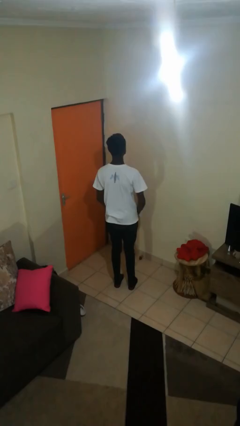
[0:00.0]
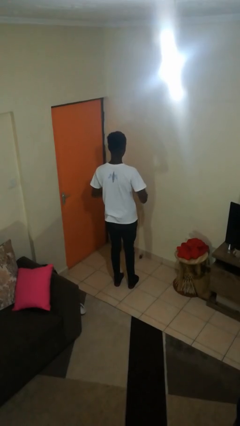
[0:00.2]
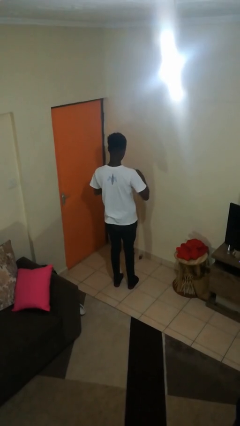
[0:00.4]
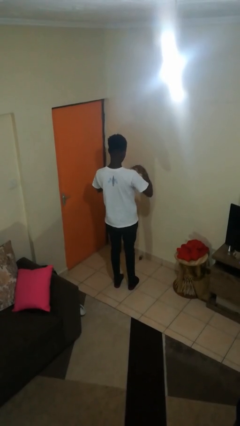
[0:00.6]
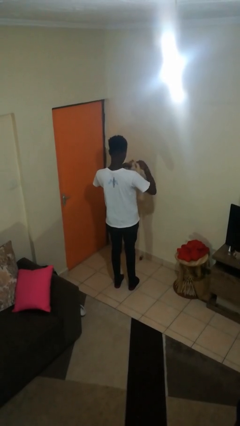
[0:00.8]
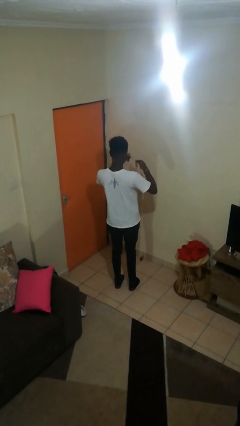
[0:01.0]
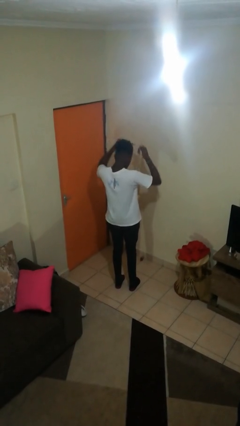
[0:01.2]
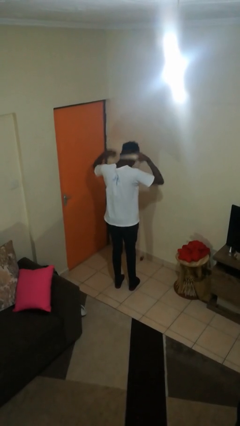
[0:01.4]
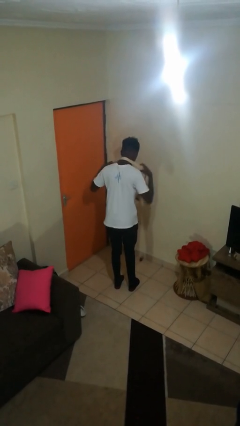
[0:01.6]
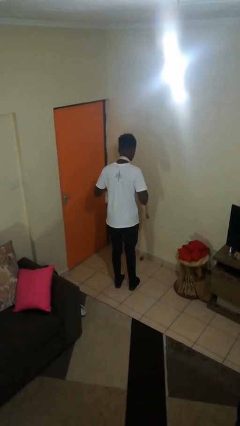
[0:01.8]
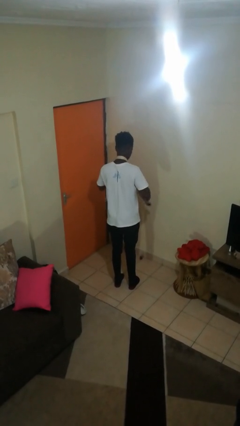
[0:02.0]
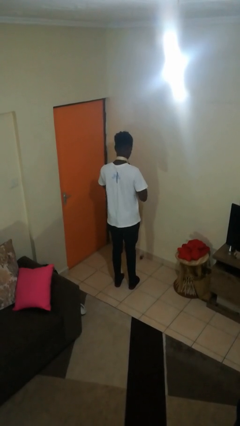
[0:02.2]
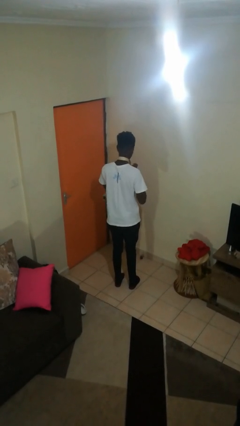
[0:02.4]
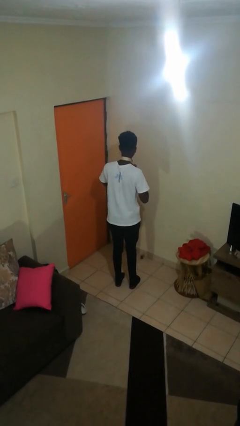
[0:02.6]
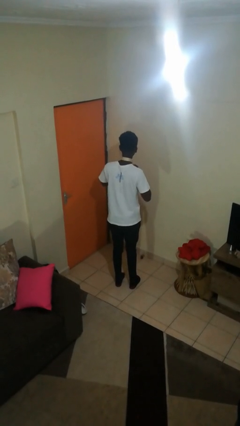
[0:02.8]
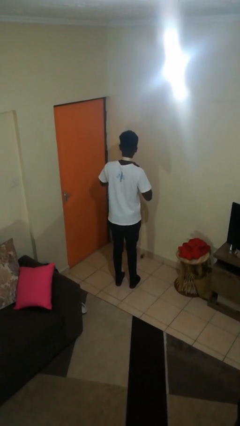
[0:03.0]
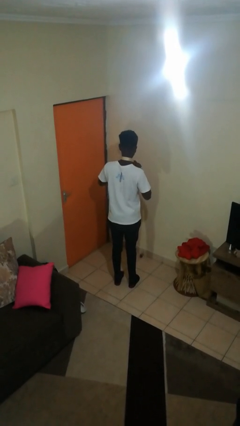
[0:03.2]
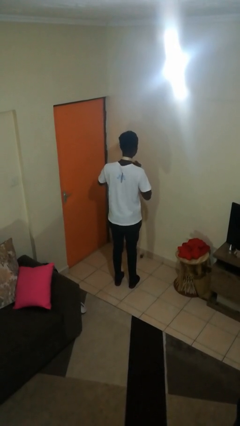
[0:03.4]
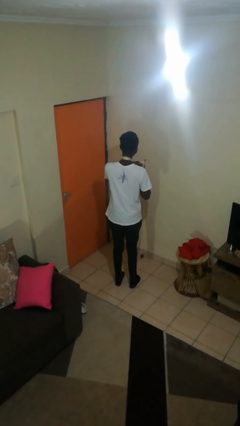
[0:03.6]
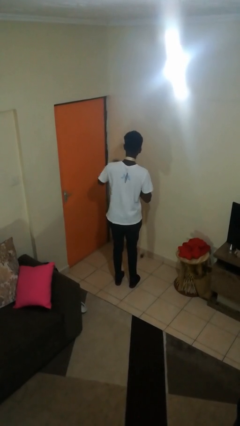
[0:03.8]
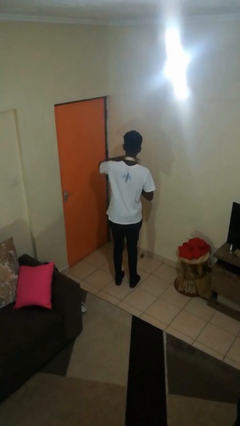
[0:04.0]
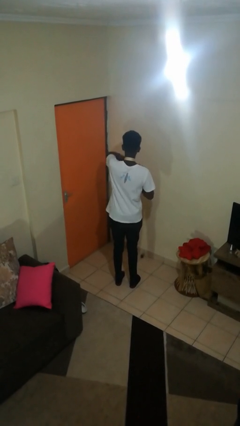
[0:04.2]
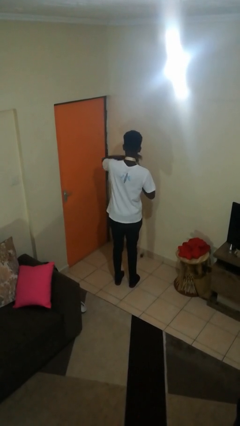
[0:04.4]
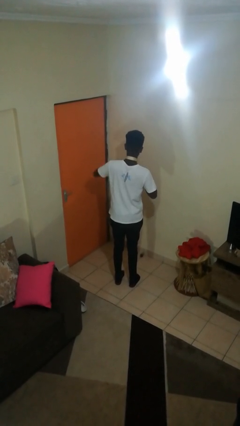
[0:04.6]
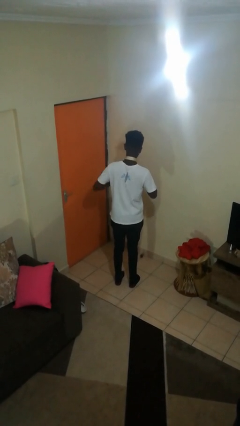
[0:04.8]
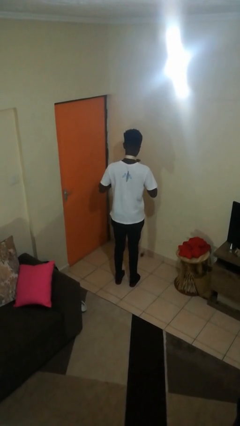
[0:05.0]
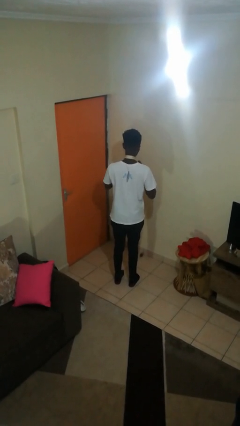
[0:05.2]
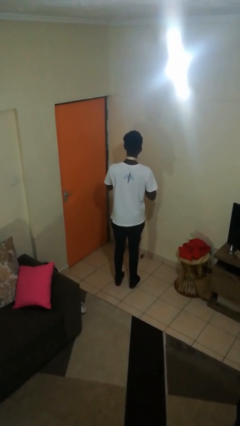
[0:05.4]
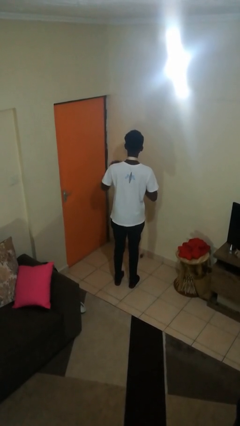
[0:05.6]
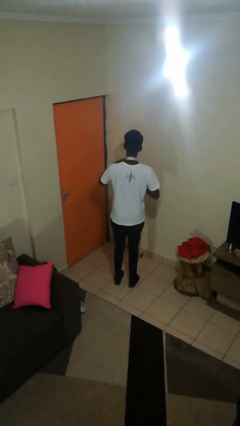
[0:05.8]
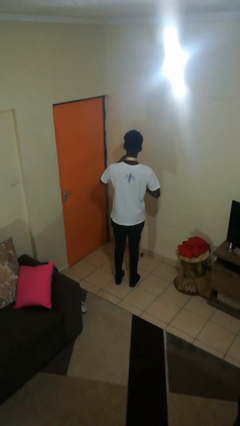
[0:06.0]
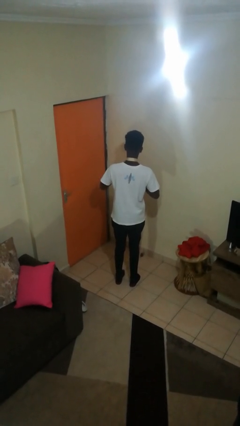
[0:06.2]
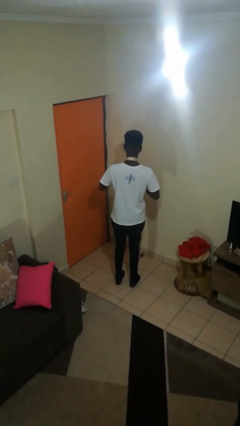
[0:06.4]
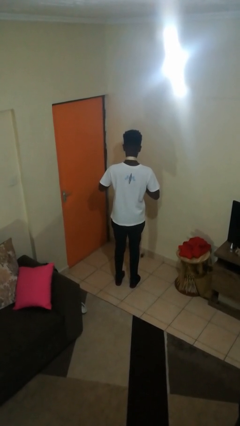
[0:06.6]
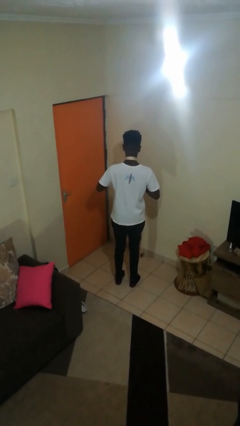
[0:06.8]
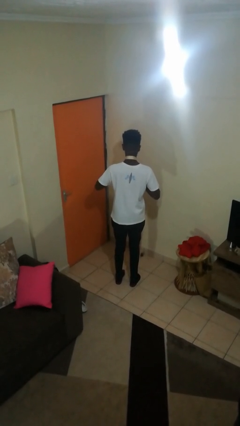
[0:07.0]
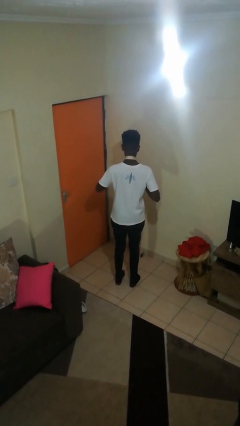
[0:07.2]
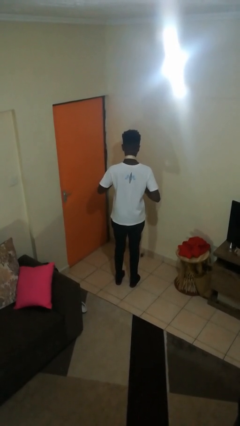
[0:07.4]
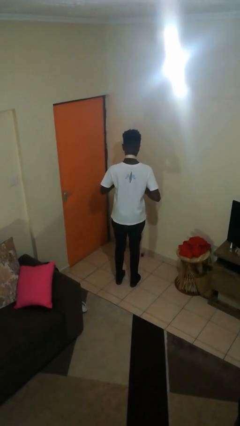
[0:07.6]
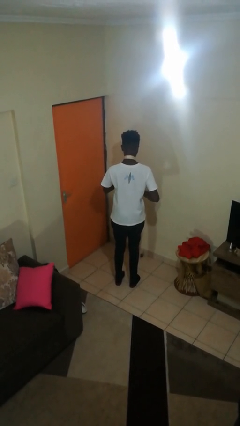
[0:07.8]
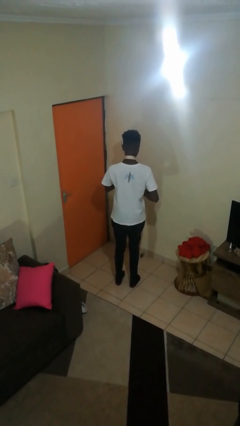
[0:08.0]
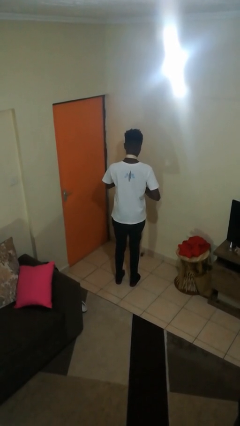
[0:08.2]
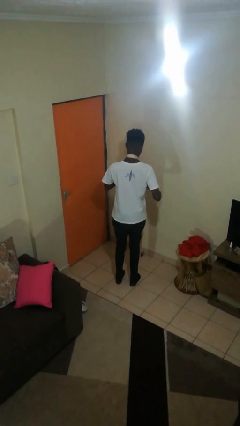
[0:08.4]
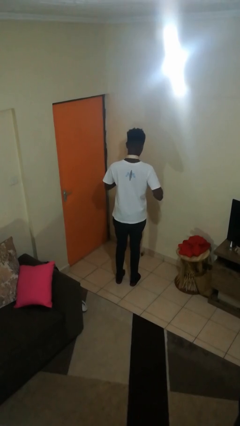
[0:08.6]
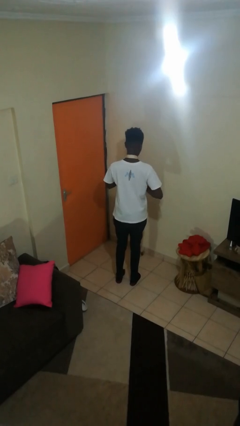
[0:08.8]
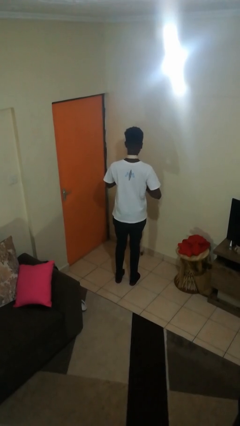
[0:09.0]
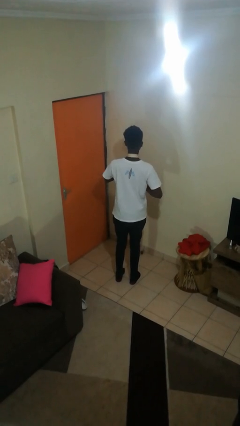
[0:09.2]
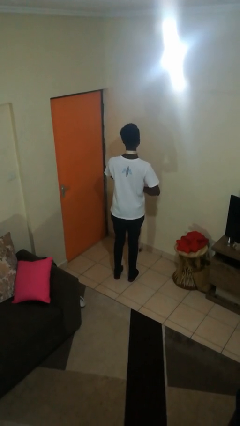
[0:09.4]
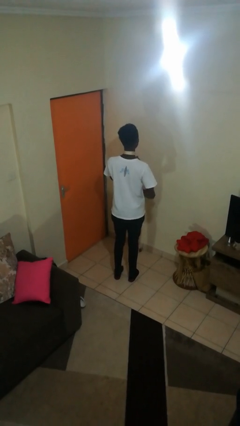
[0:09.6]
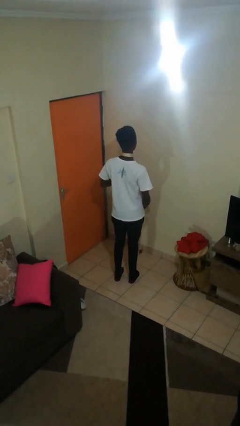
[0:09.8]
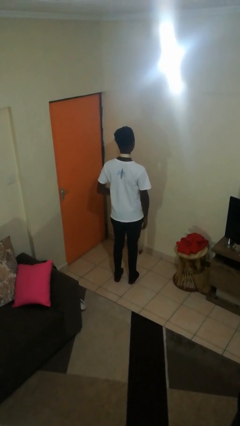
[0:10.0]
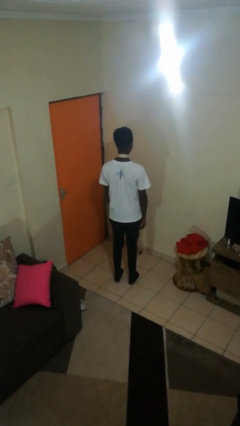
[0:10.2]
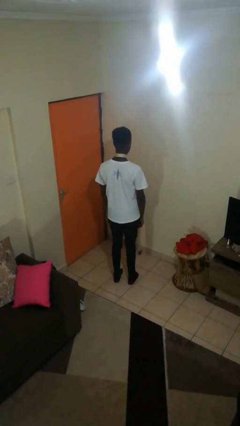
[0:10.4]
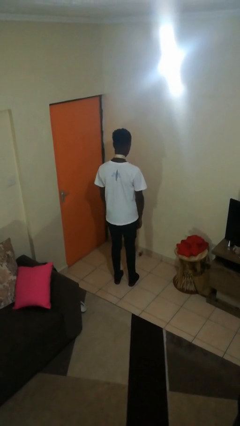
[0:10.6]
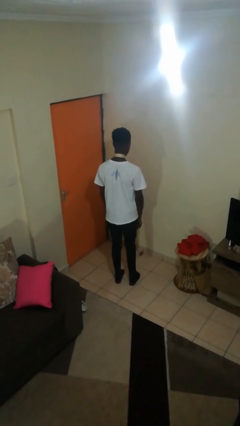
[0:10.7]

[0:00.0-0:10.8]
person puts on necktie

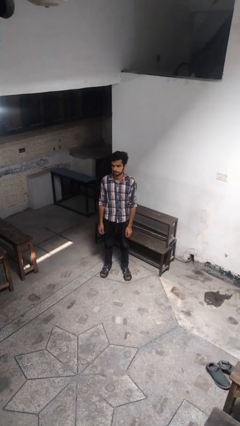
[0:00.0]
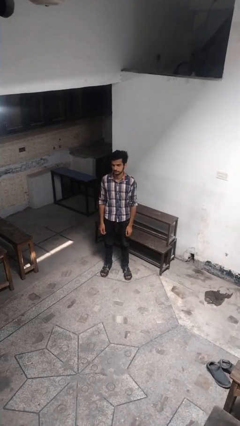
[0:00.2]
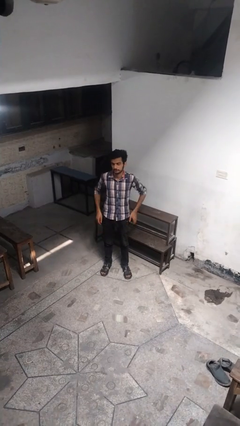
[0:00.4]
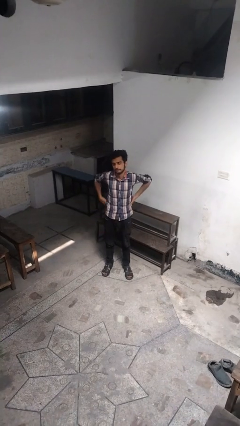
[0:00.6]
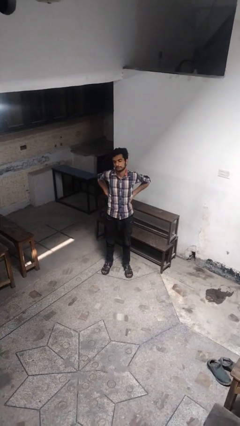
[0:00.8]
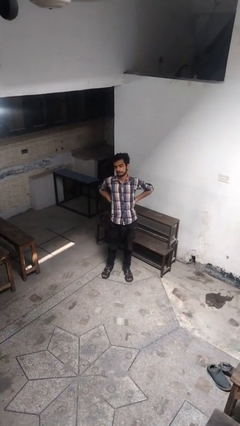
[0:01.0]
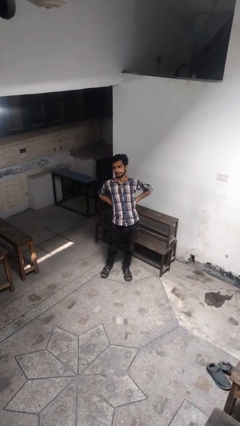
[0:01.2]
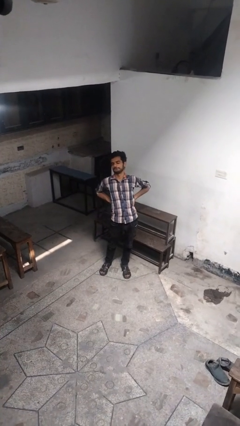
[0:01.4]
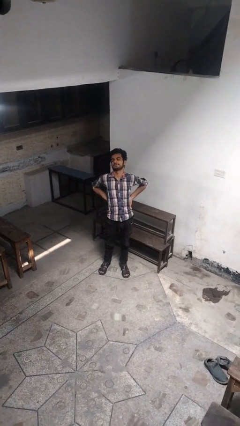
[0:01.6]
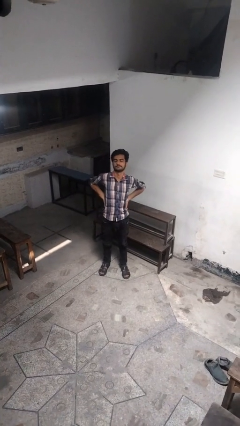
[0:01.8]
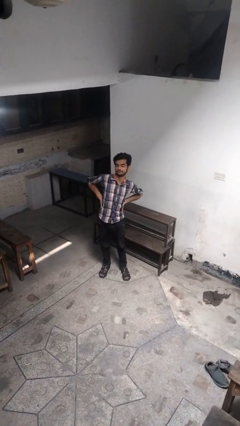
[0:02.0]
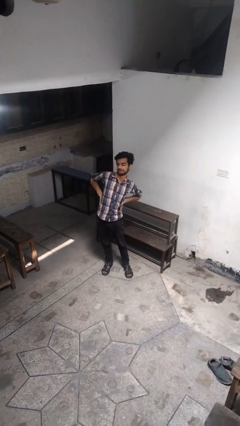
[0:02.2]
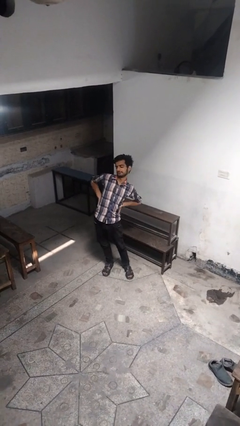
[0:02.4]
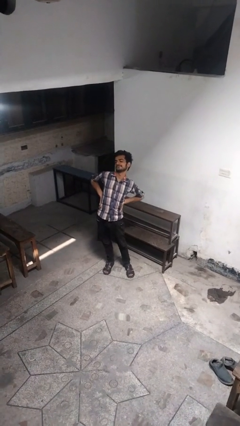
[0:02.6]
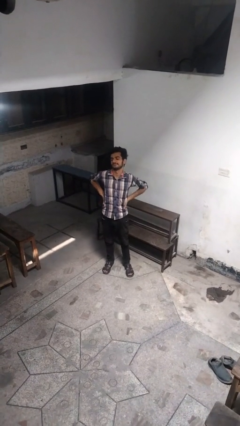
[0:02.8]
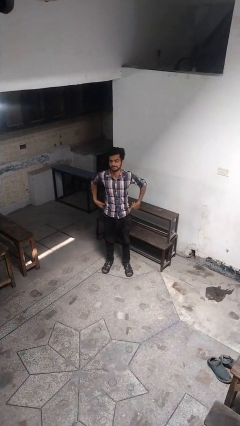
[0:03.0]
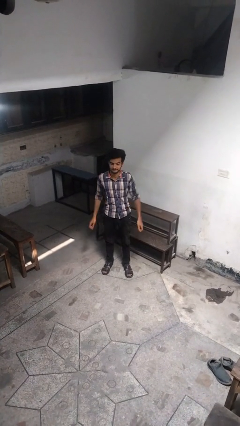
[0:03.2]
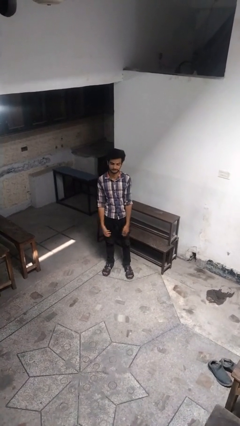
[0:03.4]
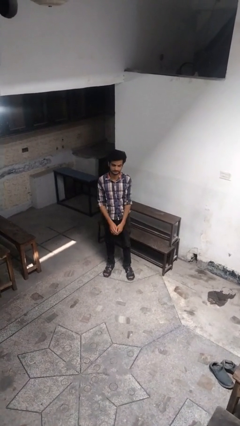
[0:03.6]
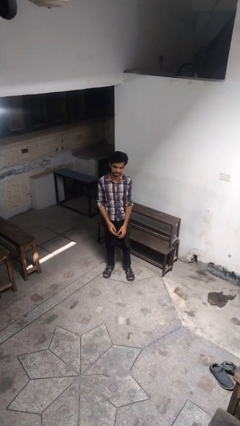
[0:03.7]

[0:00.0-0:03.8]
person stretches back

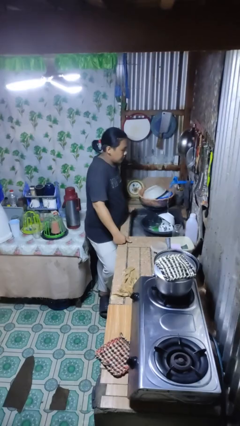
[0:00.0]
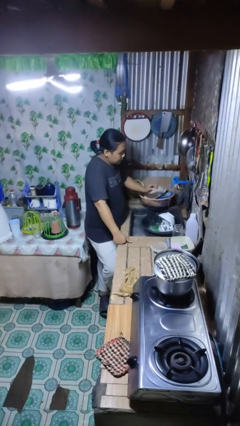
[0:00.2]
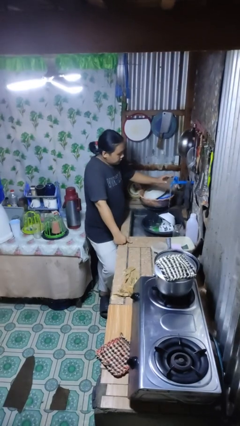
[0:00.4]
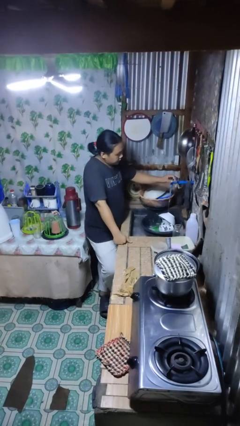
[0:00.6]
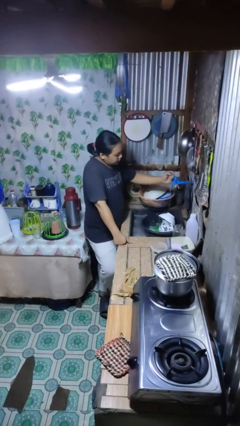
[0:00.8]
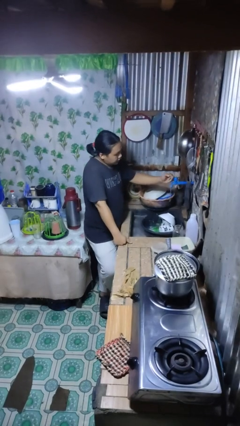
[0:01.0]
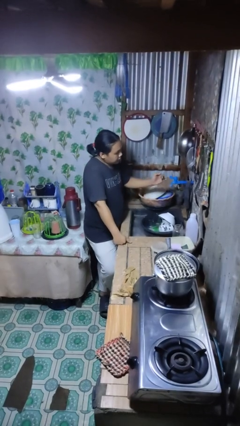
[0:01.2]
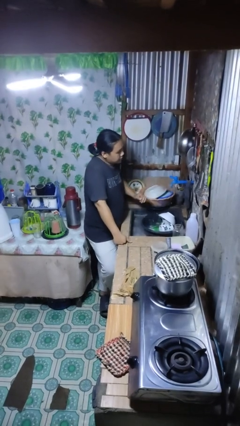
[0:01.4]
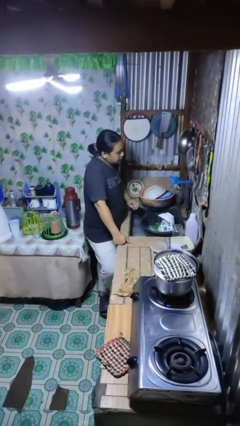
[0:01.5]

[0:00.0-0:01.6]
person turns off faucet

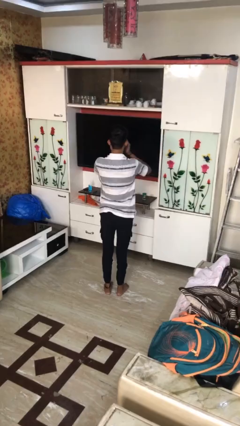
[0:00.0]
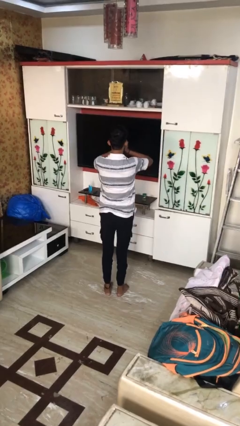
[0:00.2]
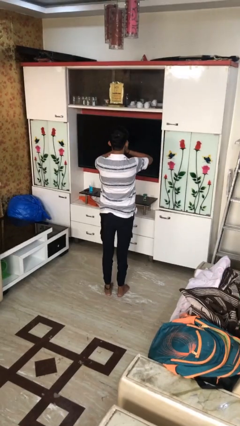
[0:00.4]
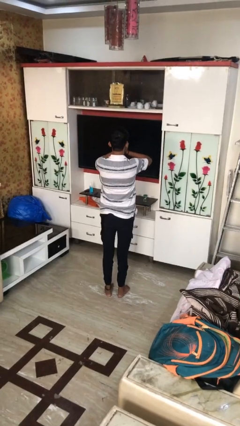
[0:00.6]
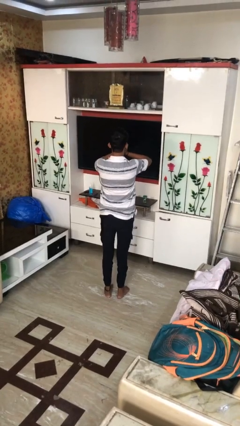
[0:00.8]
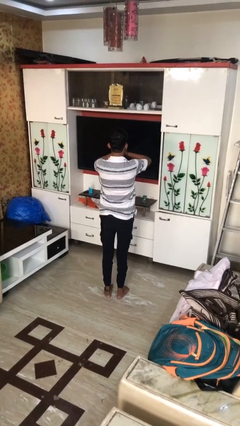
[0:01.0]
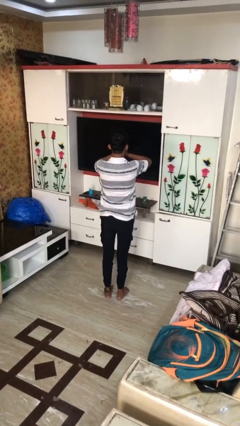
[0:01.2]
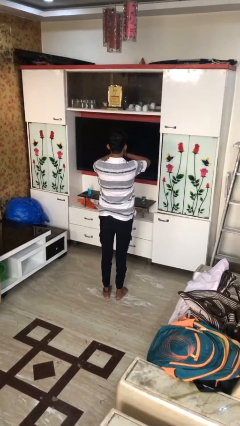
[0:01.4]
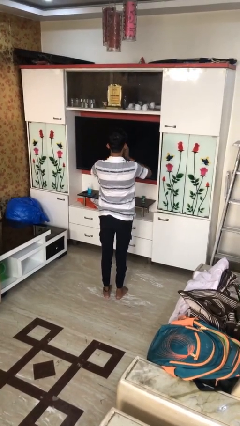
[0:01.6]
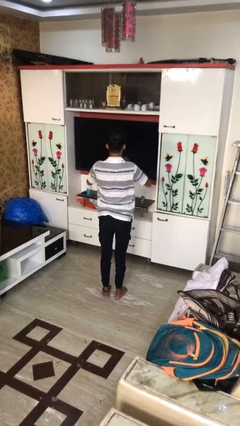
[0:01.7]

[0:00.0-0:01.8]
person covers face with hands
